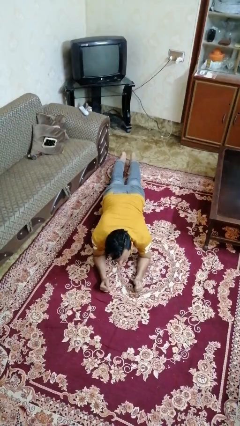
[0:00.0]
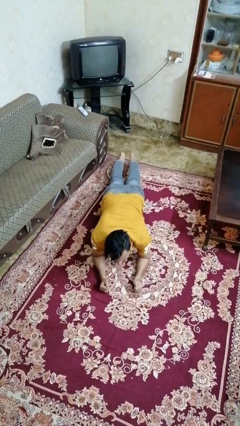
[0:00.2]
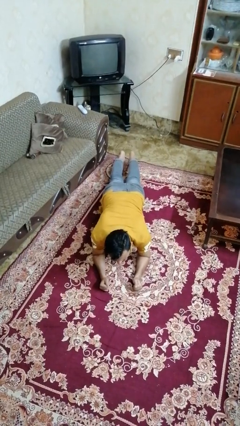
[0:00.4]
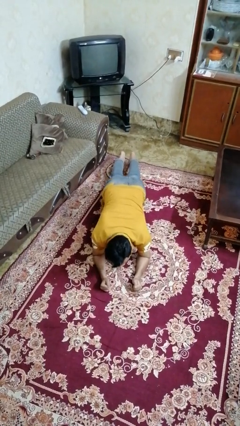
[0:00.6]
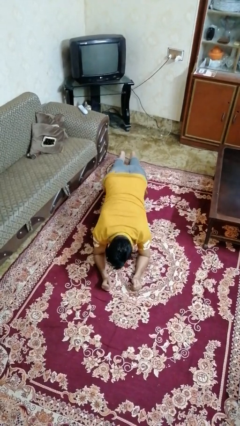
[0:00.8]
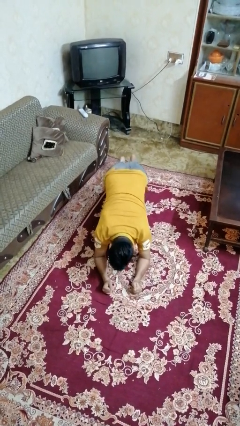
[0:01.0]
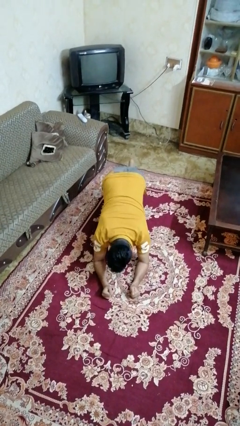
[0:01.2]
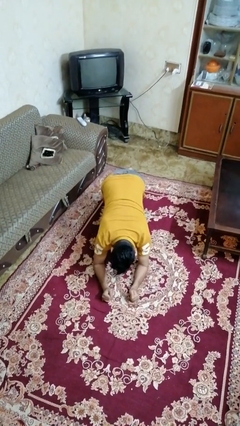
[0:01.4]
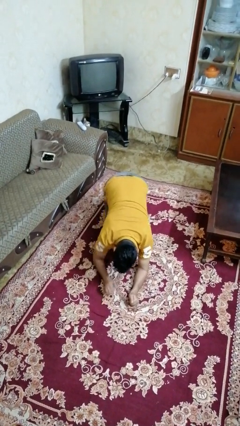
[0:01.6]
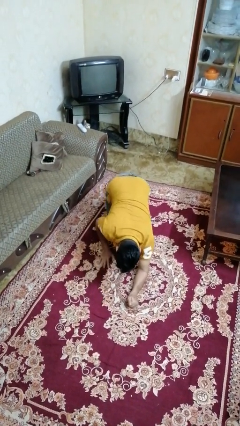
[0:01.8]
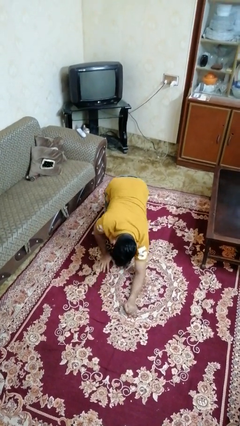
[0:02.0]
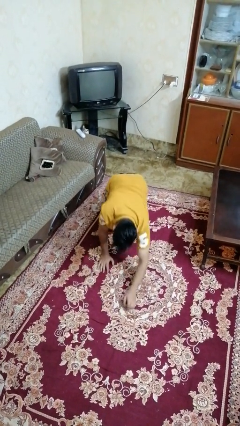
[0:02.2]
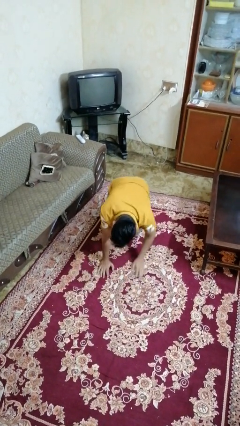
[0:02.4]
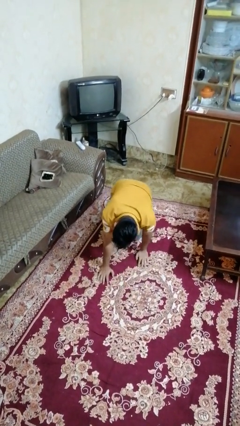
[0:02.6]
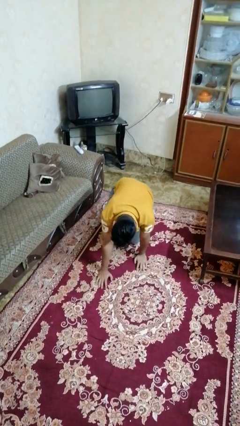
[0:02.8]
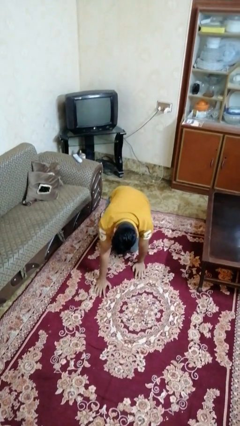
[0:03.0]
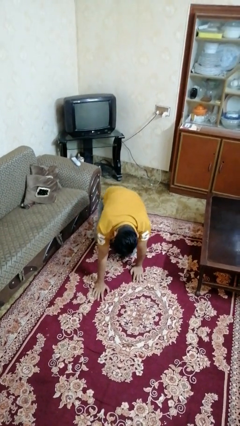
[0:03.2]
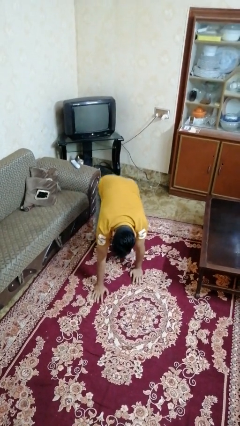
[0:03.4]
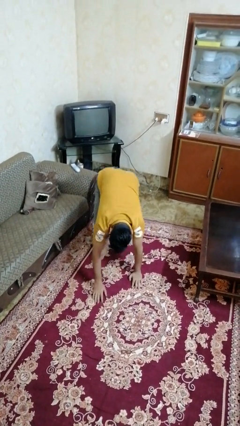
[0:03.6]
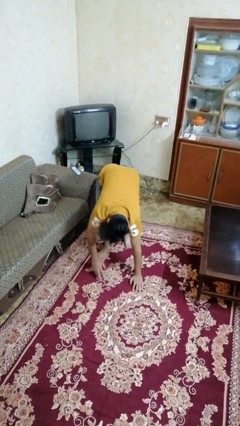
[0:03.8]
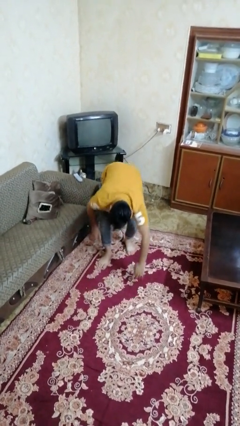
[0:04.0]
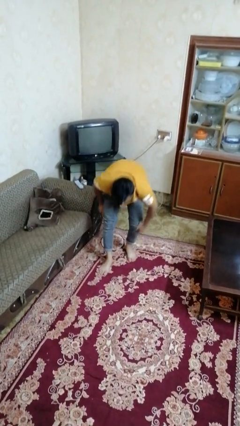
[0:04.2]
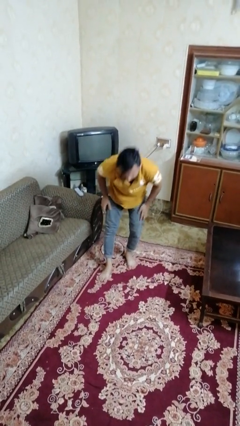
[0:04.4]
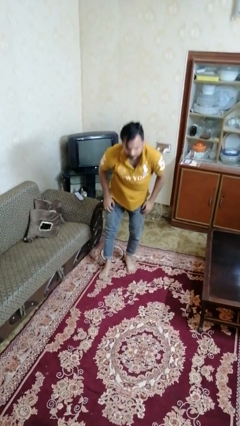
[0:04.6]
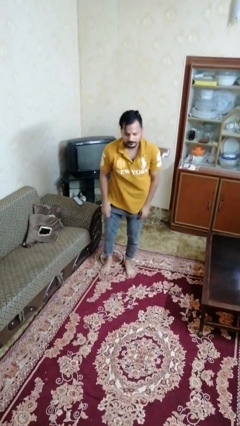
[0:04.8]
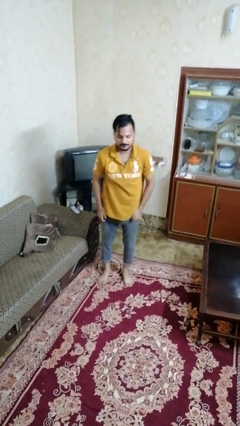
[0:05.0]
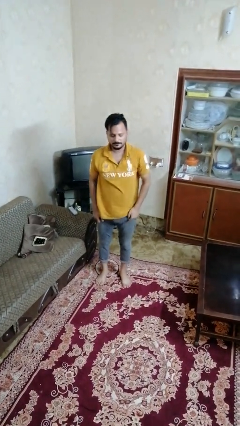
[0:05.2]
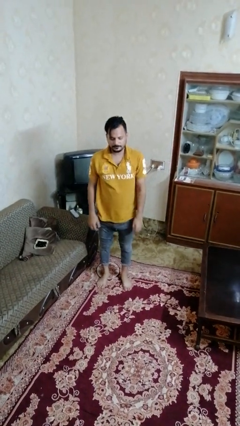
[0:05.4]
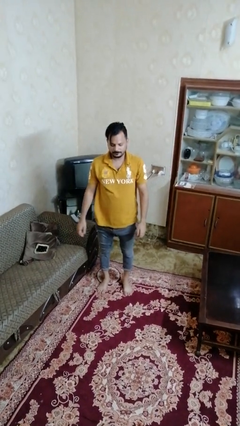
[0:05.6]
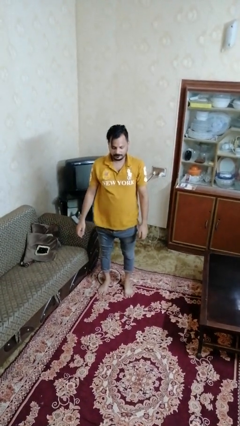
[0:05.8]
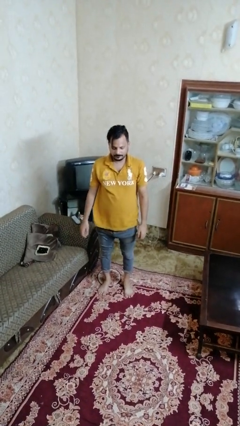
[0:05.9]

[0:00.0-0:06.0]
person stands up from floor

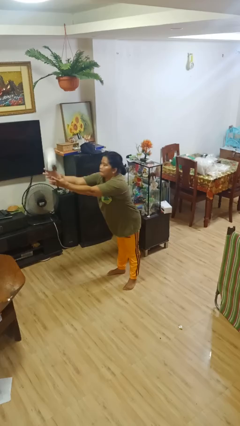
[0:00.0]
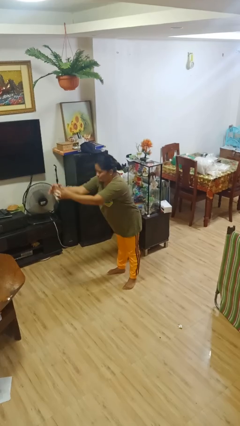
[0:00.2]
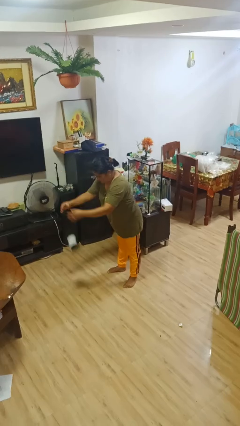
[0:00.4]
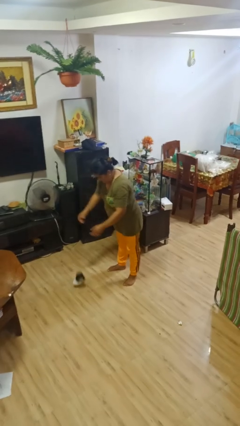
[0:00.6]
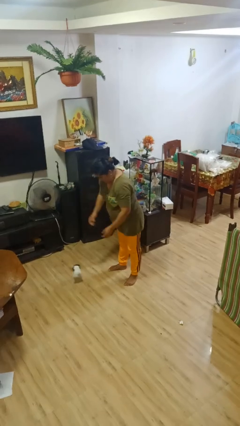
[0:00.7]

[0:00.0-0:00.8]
person catches dropped object

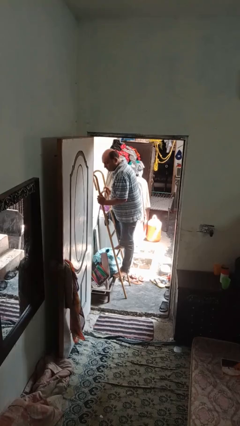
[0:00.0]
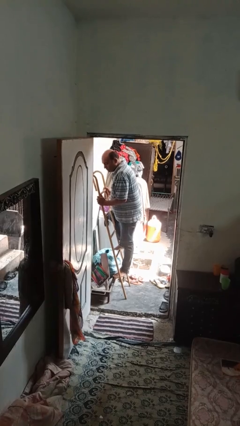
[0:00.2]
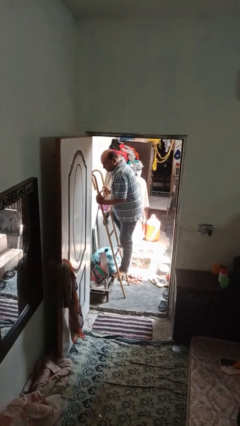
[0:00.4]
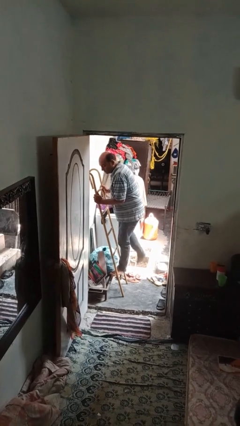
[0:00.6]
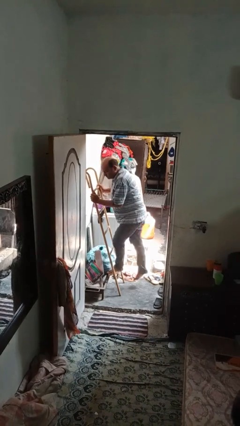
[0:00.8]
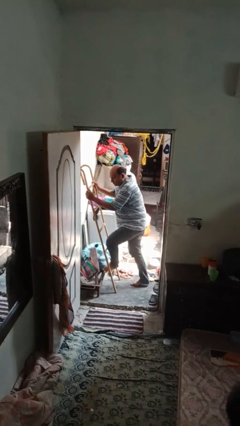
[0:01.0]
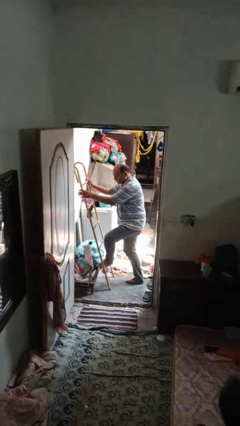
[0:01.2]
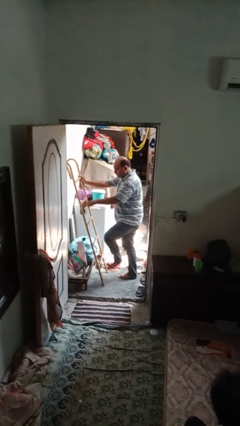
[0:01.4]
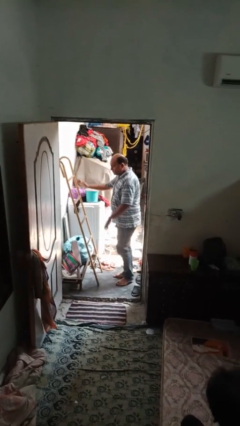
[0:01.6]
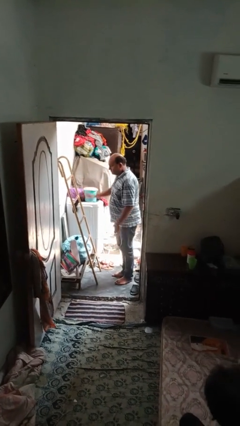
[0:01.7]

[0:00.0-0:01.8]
person climbs down ladder

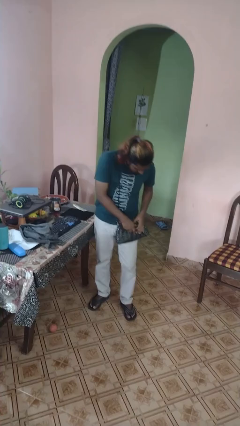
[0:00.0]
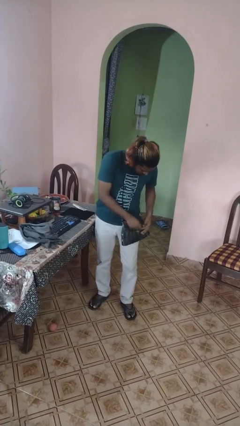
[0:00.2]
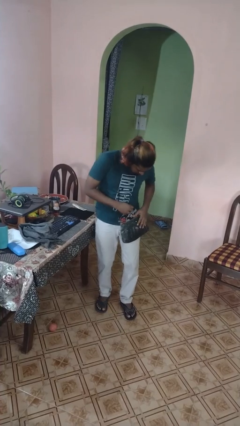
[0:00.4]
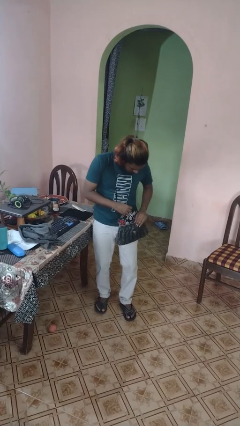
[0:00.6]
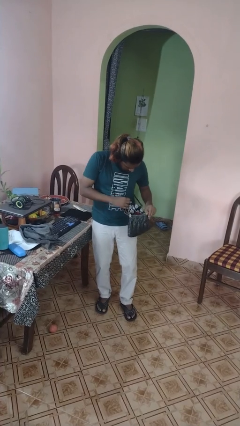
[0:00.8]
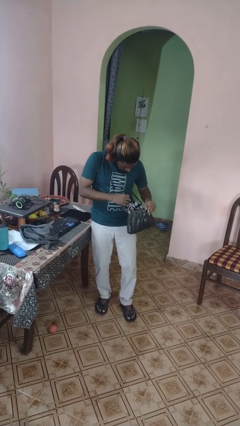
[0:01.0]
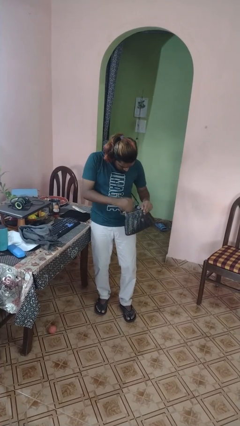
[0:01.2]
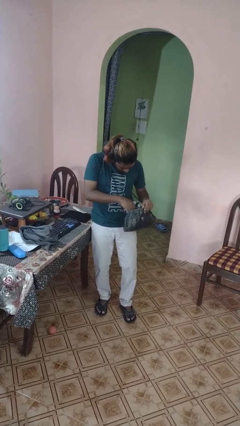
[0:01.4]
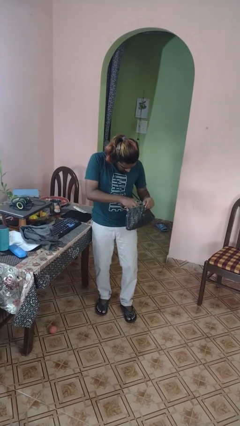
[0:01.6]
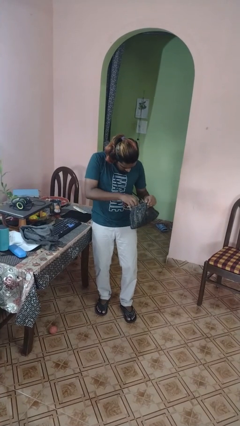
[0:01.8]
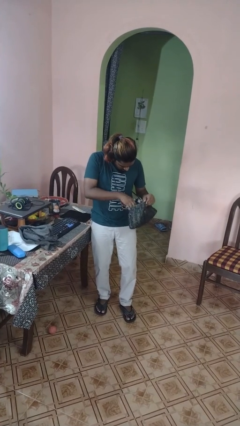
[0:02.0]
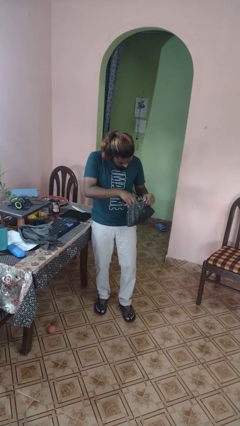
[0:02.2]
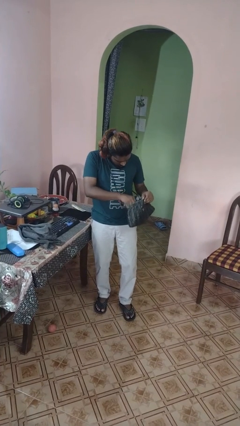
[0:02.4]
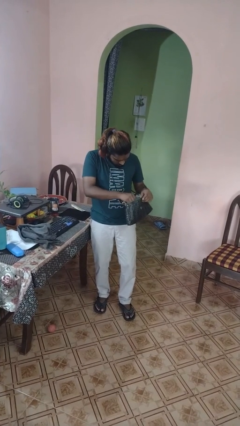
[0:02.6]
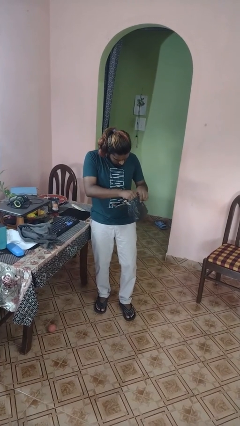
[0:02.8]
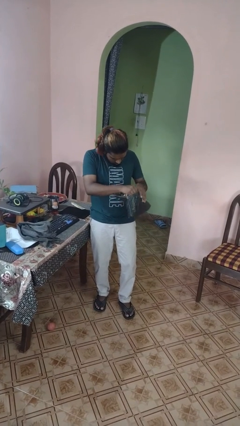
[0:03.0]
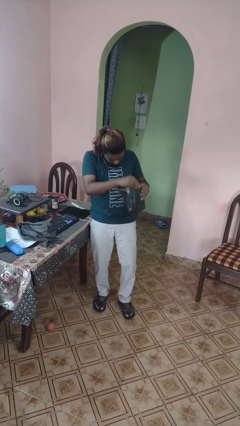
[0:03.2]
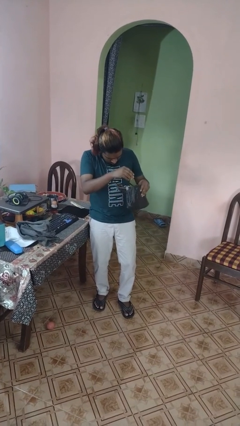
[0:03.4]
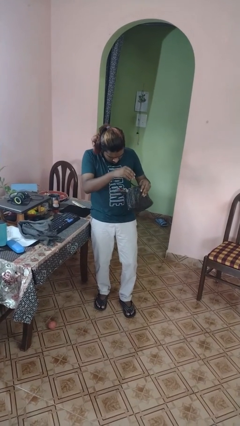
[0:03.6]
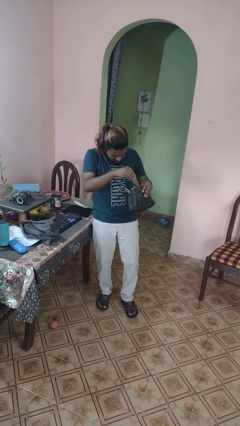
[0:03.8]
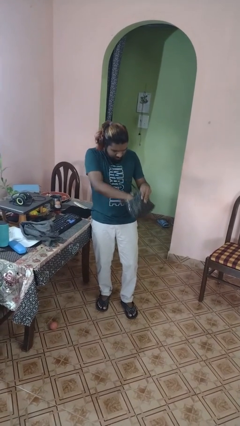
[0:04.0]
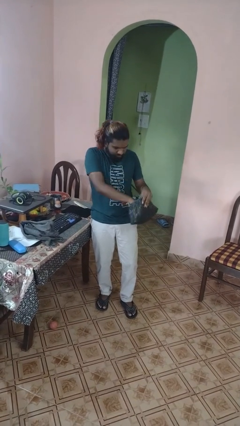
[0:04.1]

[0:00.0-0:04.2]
person searches in purse

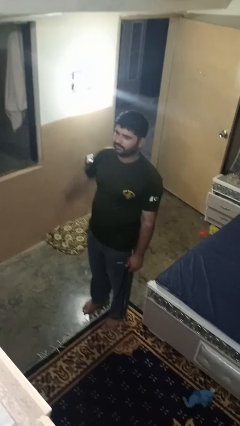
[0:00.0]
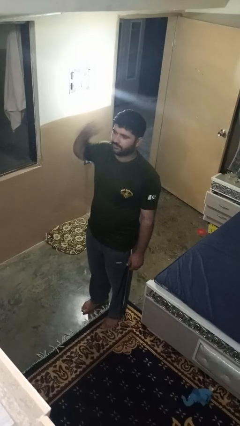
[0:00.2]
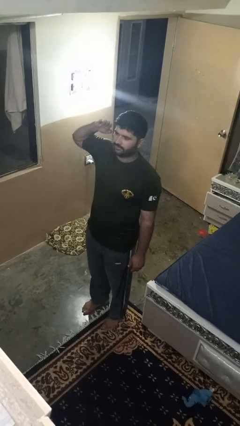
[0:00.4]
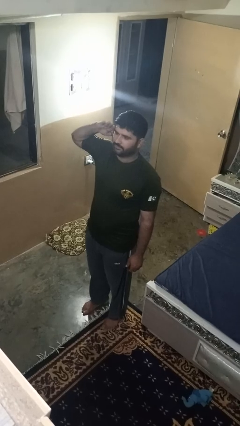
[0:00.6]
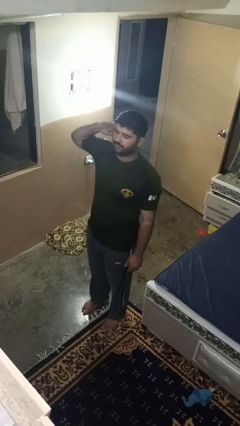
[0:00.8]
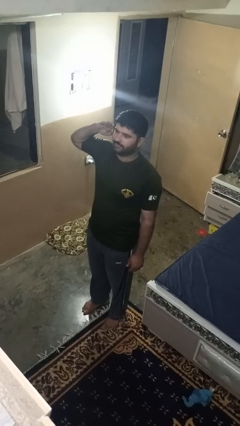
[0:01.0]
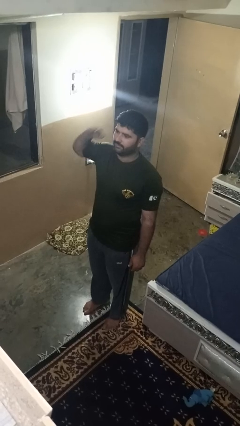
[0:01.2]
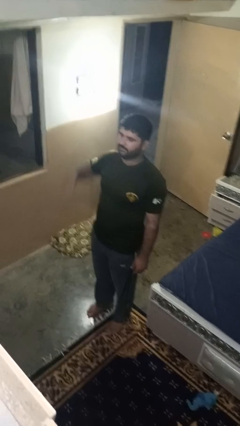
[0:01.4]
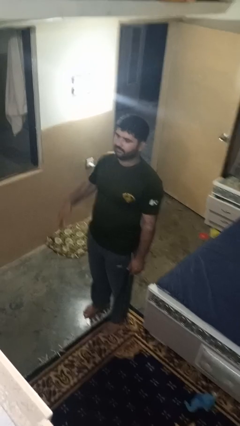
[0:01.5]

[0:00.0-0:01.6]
person salutes

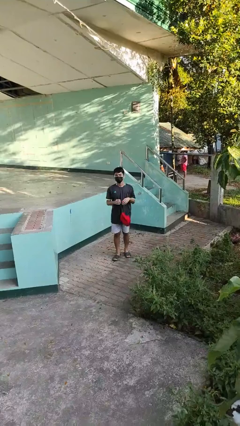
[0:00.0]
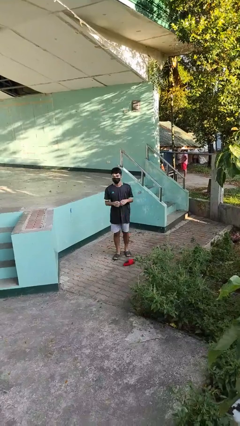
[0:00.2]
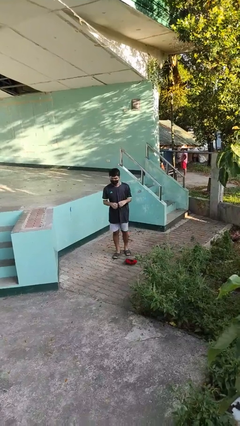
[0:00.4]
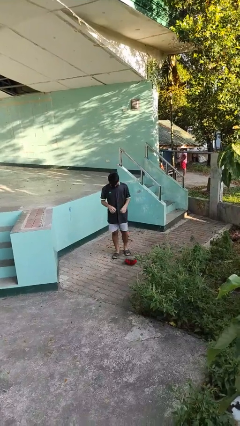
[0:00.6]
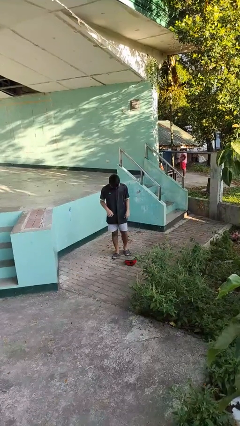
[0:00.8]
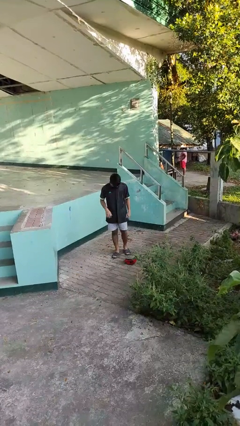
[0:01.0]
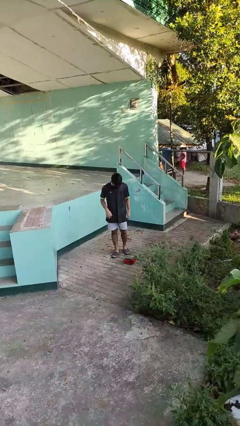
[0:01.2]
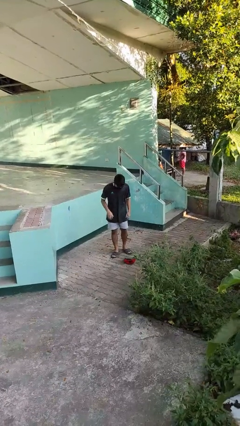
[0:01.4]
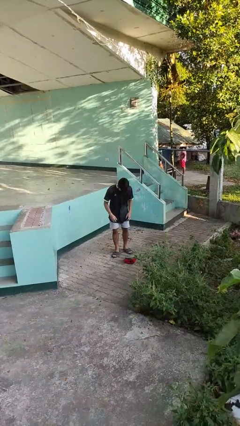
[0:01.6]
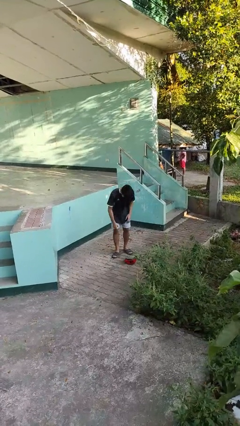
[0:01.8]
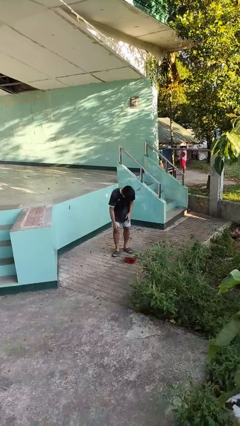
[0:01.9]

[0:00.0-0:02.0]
person drops object

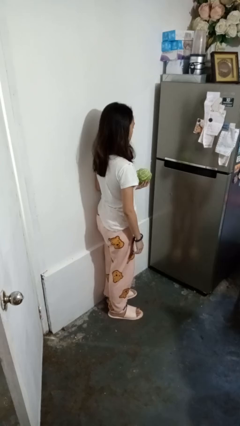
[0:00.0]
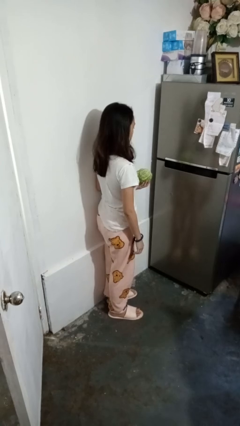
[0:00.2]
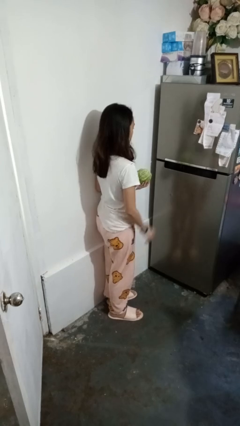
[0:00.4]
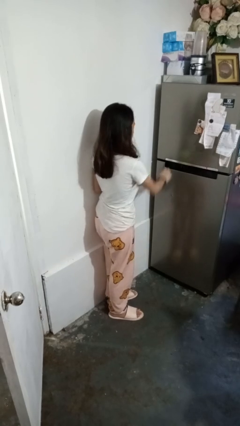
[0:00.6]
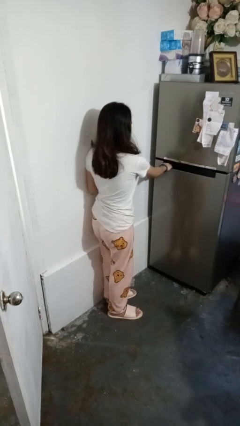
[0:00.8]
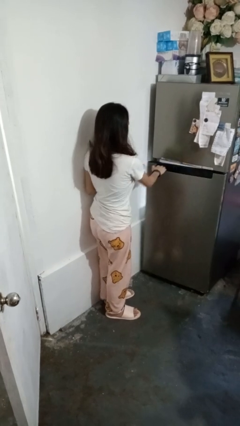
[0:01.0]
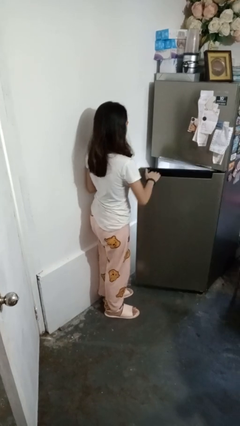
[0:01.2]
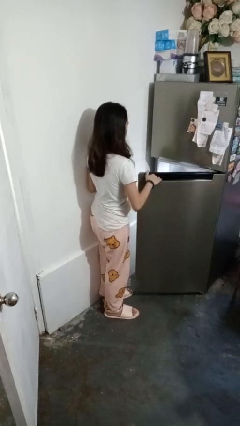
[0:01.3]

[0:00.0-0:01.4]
person opens refrigerator
